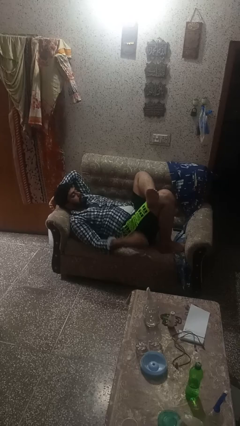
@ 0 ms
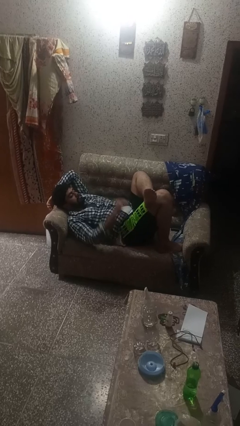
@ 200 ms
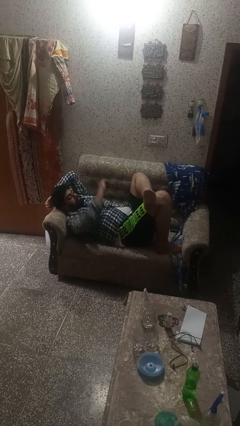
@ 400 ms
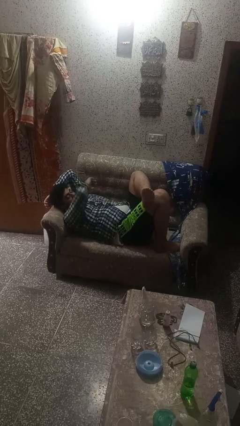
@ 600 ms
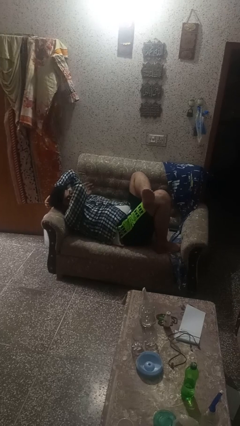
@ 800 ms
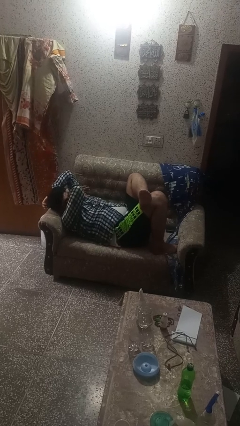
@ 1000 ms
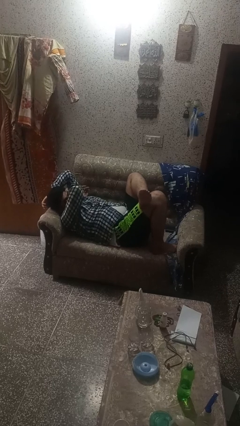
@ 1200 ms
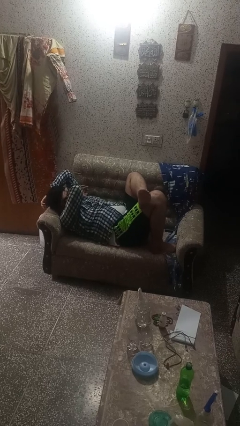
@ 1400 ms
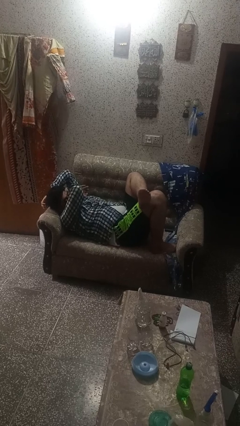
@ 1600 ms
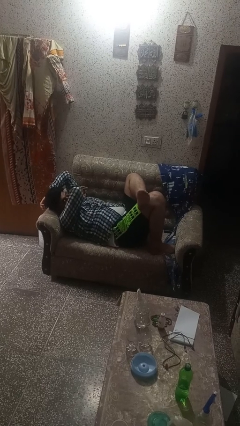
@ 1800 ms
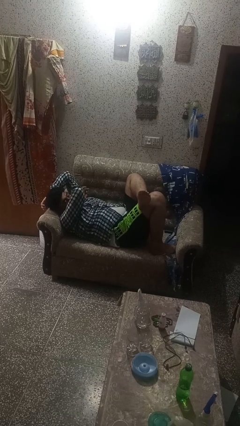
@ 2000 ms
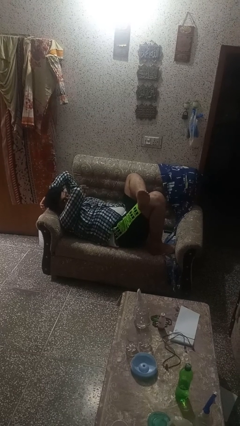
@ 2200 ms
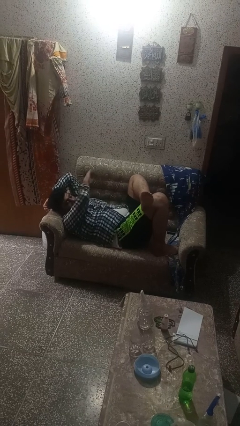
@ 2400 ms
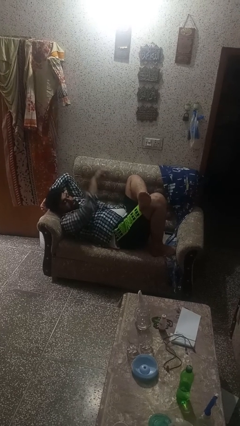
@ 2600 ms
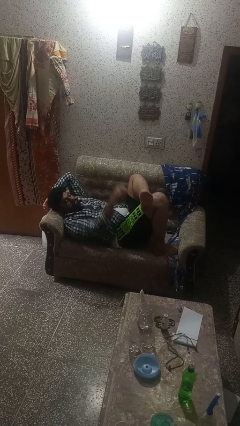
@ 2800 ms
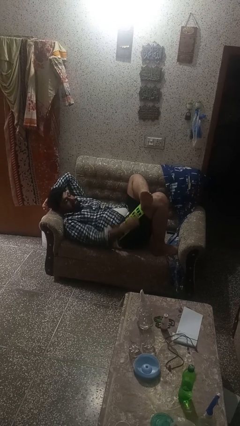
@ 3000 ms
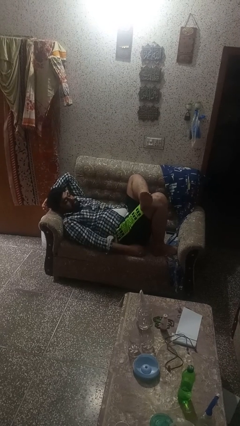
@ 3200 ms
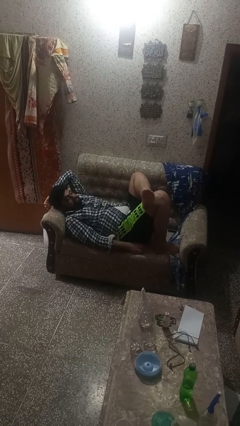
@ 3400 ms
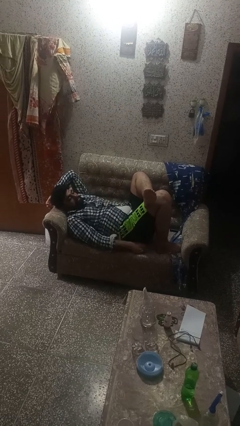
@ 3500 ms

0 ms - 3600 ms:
person sneezes into arm

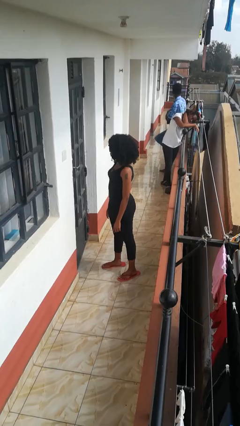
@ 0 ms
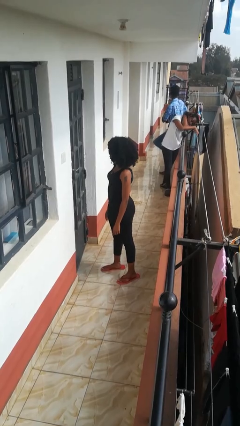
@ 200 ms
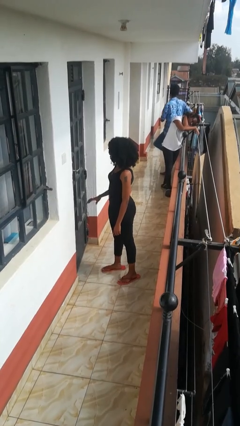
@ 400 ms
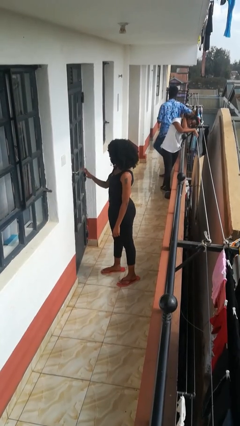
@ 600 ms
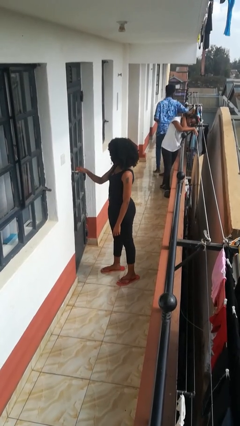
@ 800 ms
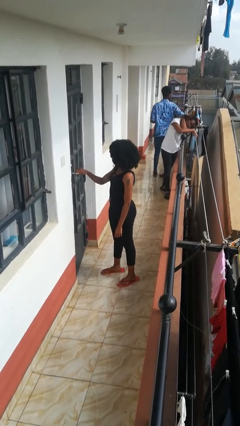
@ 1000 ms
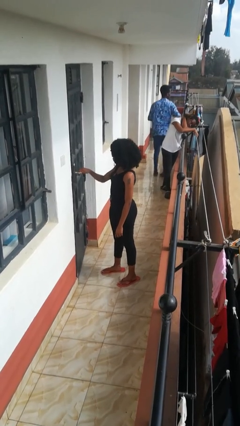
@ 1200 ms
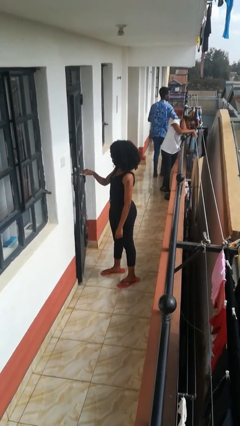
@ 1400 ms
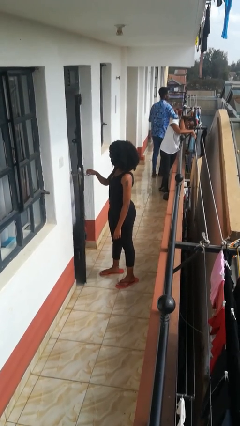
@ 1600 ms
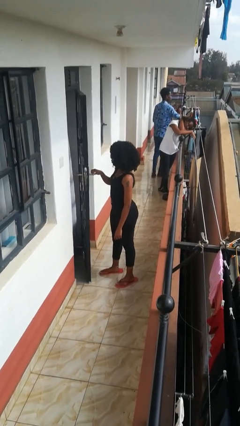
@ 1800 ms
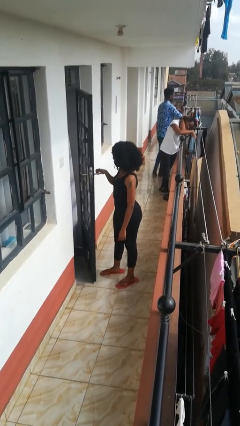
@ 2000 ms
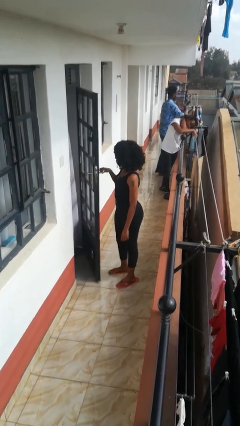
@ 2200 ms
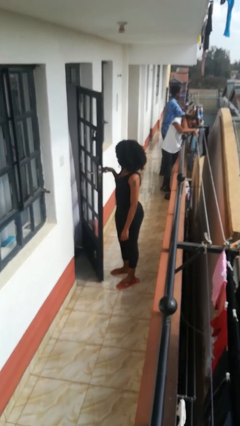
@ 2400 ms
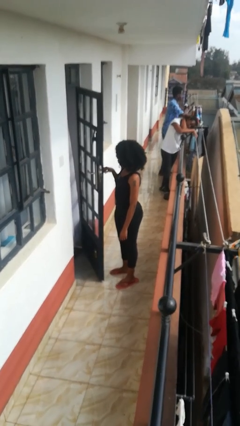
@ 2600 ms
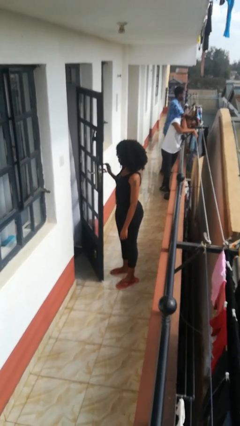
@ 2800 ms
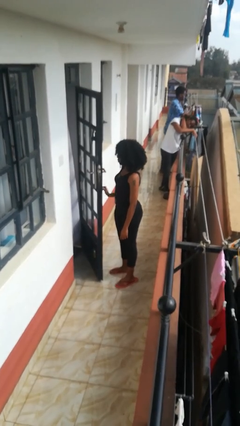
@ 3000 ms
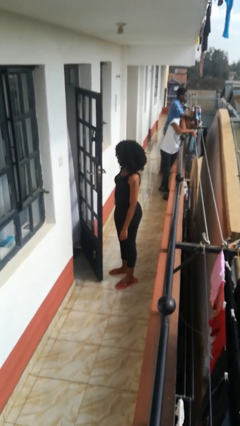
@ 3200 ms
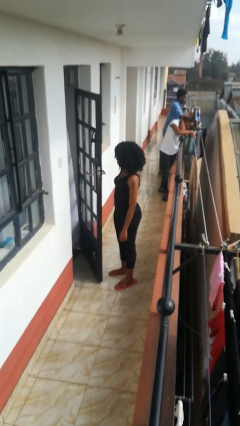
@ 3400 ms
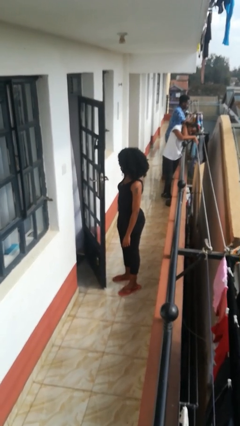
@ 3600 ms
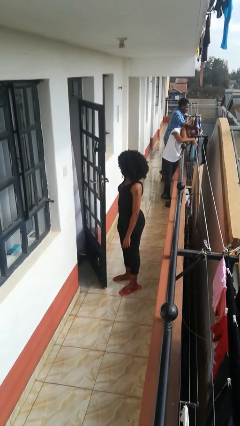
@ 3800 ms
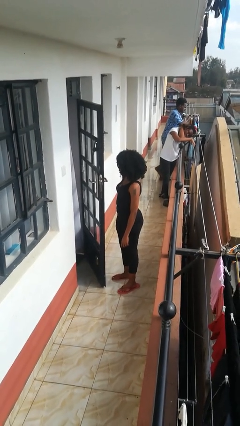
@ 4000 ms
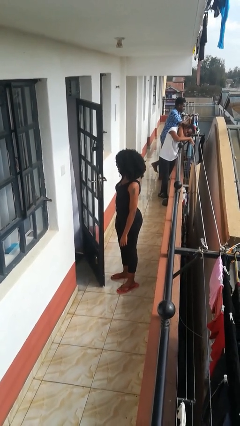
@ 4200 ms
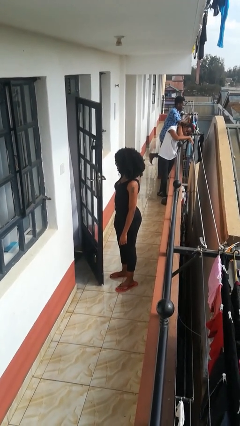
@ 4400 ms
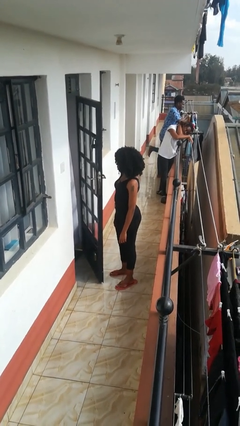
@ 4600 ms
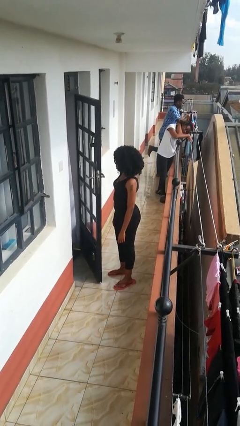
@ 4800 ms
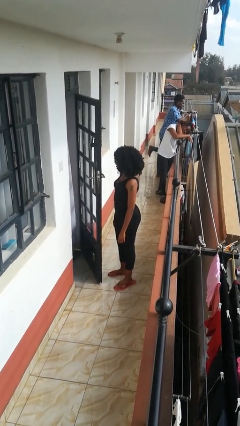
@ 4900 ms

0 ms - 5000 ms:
person opens facility door

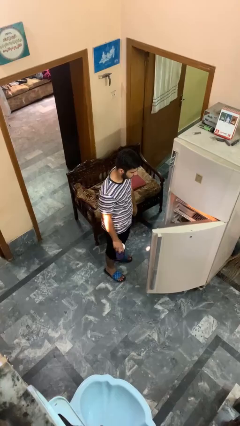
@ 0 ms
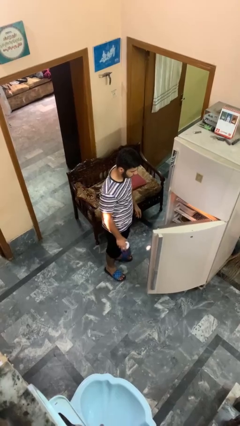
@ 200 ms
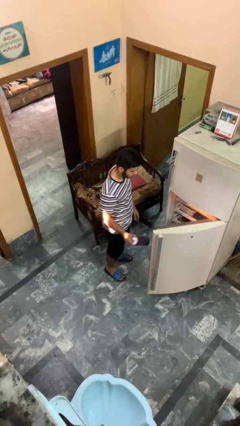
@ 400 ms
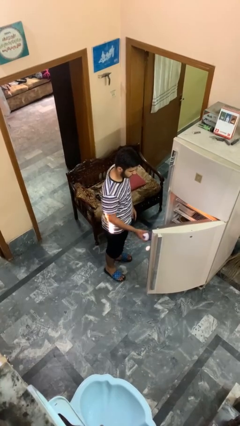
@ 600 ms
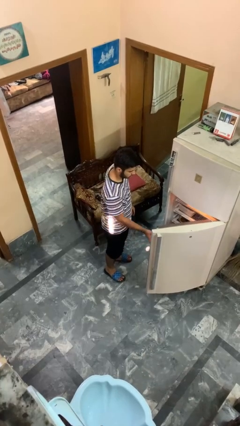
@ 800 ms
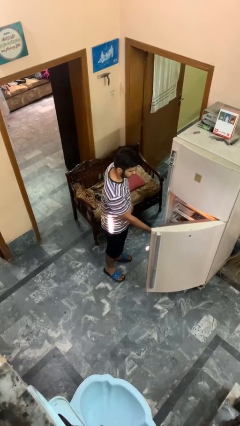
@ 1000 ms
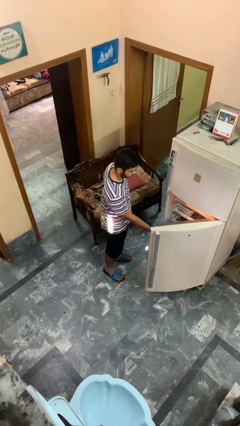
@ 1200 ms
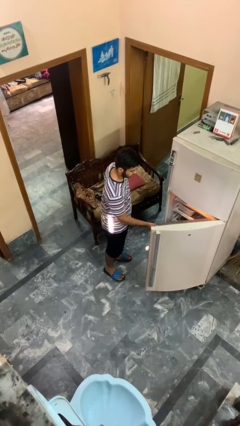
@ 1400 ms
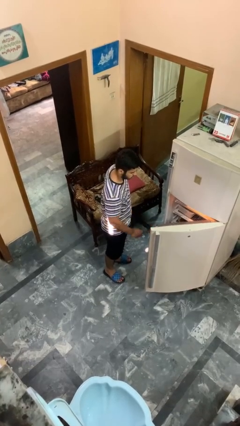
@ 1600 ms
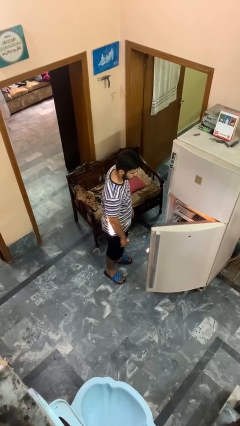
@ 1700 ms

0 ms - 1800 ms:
person puts object into refrigerator

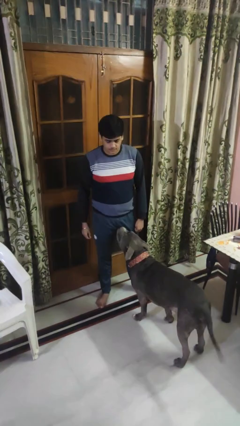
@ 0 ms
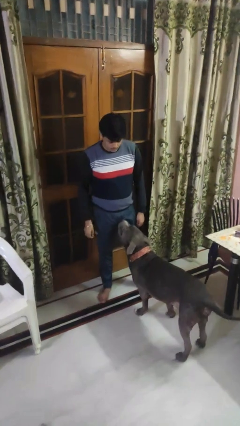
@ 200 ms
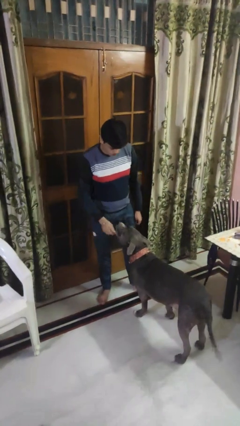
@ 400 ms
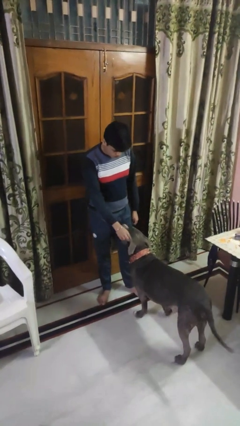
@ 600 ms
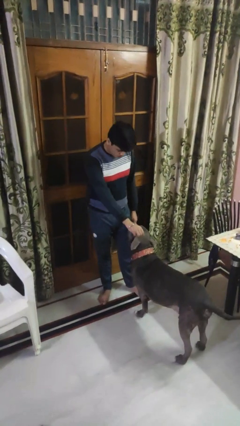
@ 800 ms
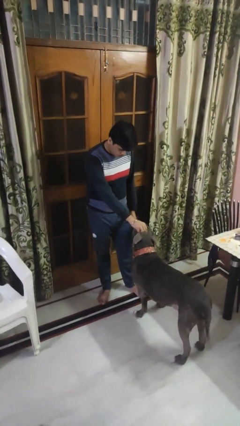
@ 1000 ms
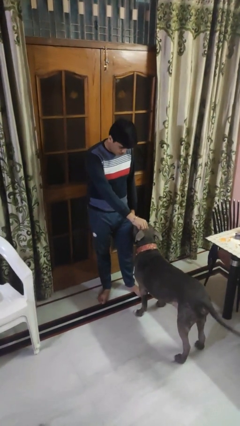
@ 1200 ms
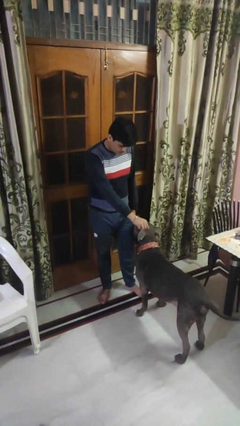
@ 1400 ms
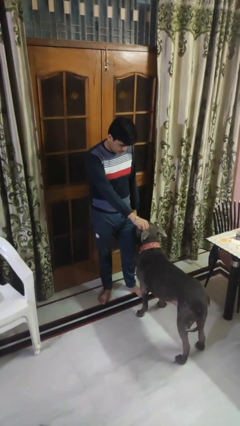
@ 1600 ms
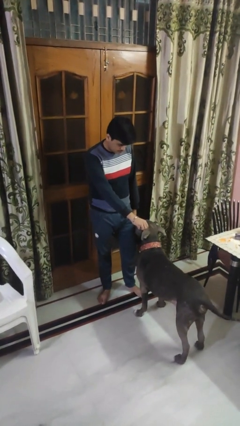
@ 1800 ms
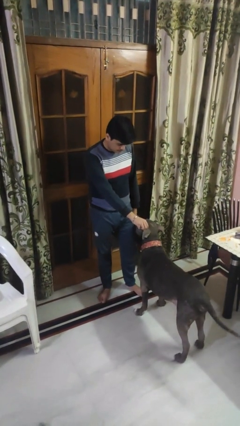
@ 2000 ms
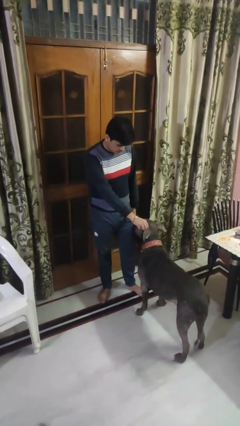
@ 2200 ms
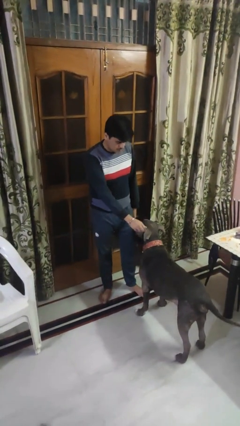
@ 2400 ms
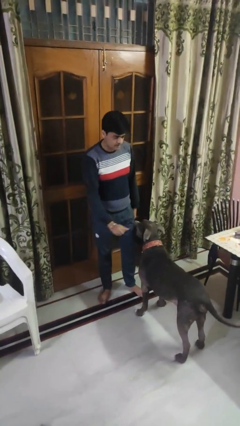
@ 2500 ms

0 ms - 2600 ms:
person points to dog

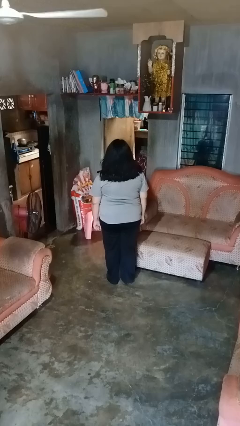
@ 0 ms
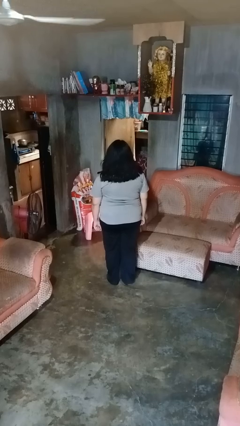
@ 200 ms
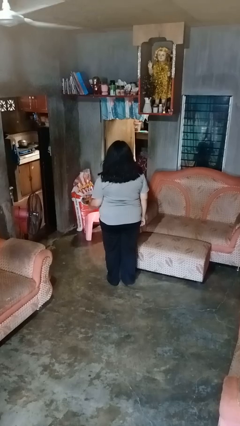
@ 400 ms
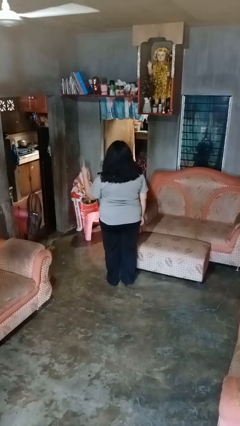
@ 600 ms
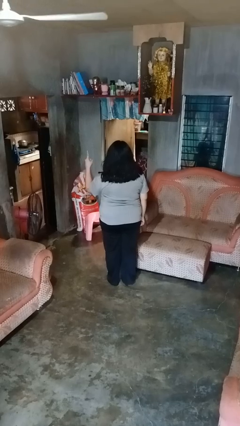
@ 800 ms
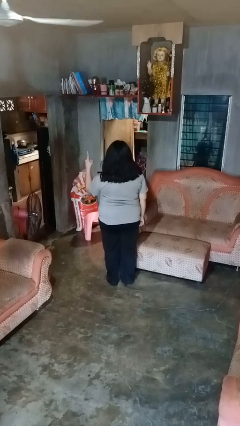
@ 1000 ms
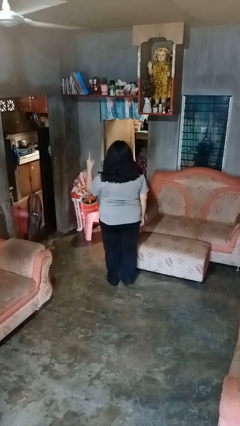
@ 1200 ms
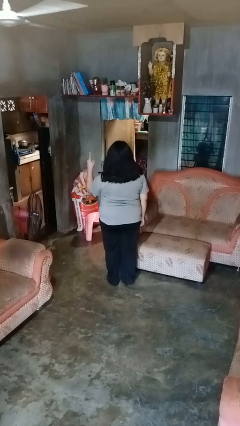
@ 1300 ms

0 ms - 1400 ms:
person gestures number one

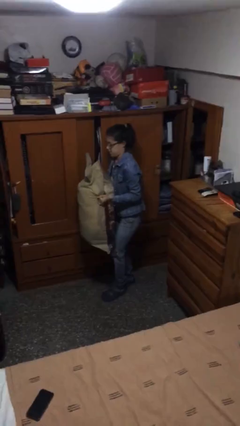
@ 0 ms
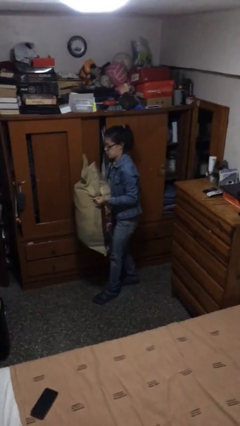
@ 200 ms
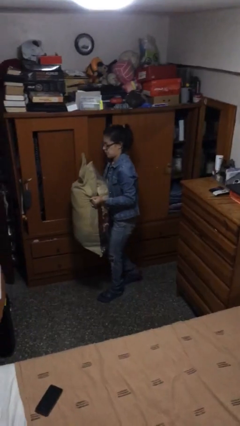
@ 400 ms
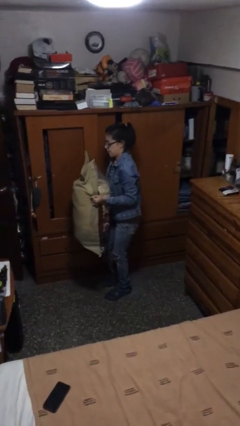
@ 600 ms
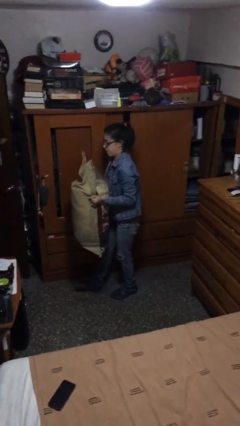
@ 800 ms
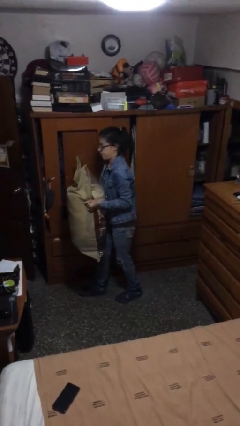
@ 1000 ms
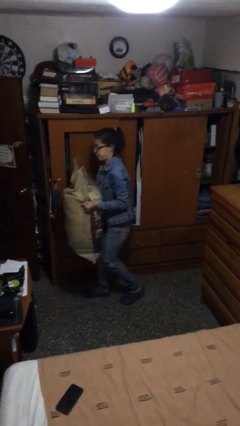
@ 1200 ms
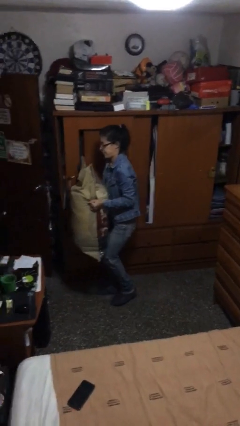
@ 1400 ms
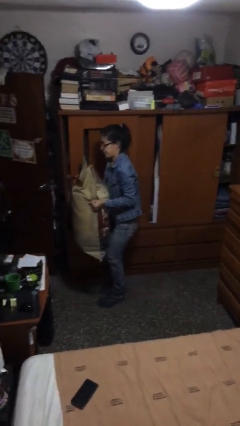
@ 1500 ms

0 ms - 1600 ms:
person carries heavy object

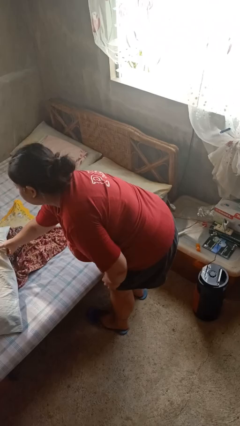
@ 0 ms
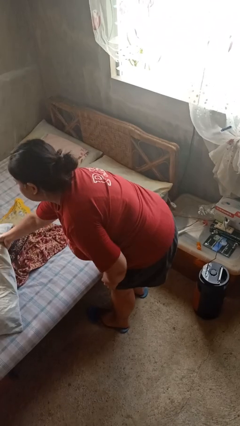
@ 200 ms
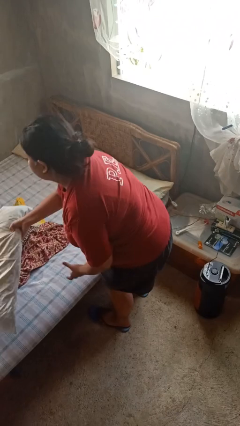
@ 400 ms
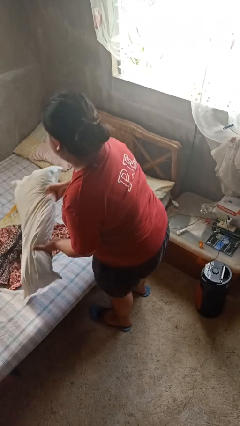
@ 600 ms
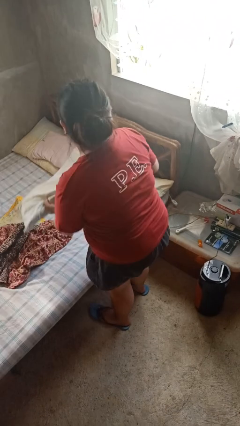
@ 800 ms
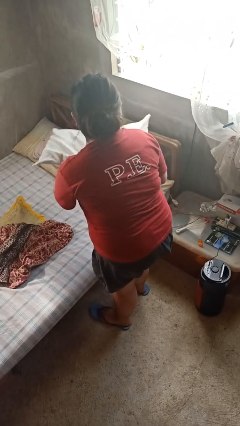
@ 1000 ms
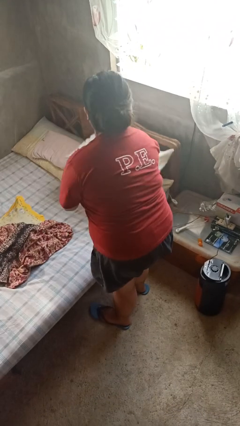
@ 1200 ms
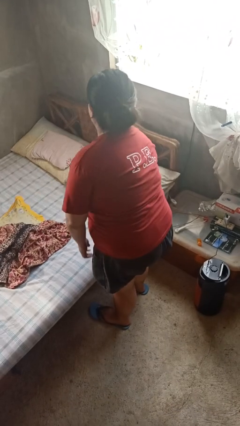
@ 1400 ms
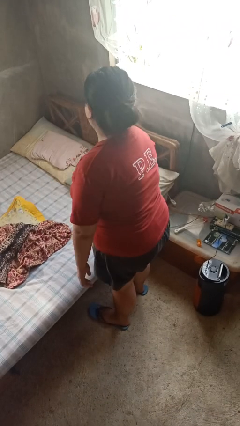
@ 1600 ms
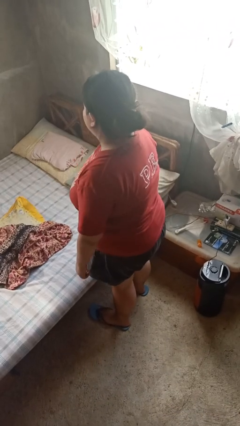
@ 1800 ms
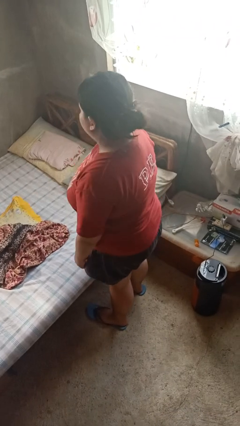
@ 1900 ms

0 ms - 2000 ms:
person makes bed
